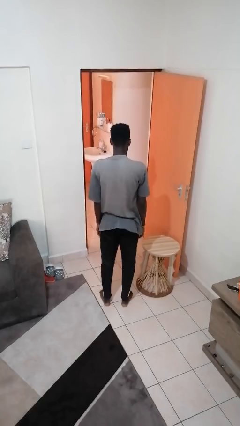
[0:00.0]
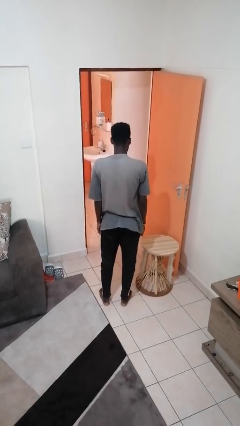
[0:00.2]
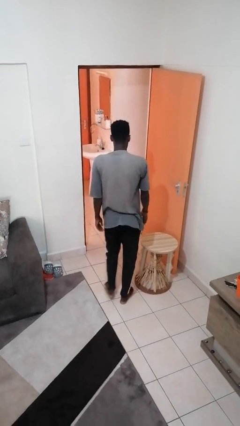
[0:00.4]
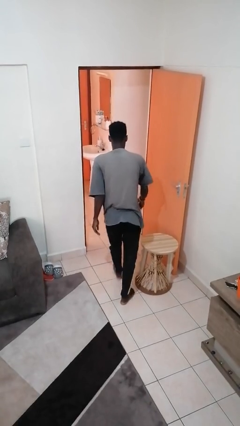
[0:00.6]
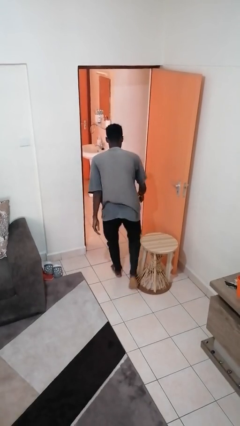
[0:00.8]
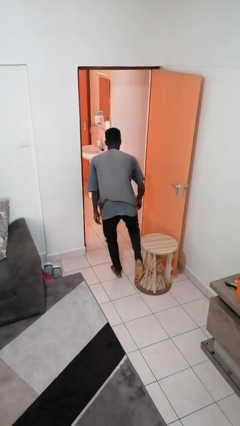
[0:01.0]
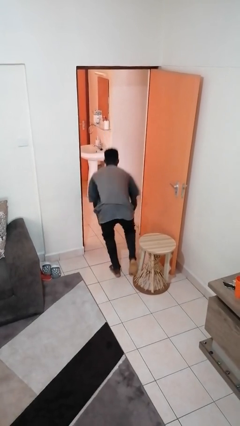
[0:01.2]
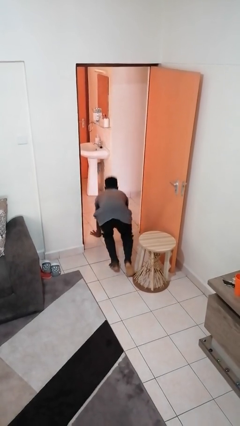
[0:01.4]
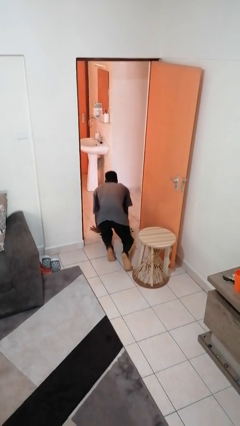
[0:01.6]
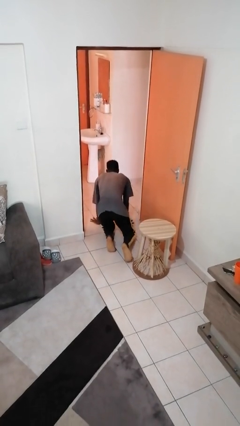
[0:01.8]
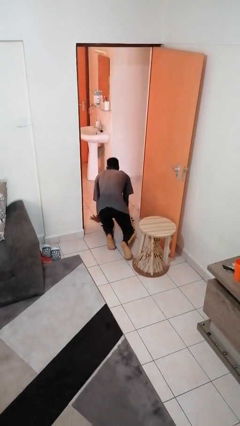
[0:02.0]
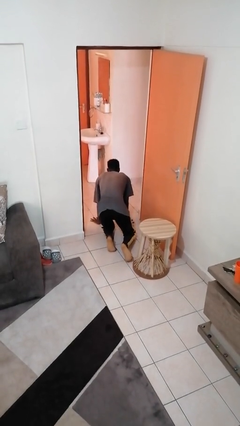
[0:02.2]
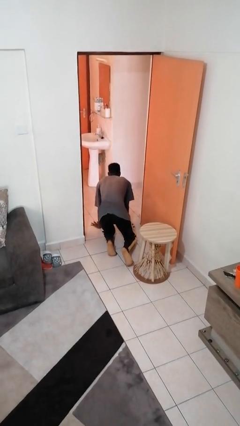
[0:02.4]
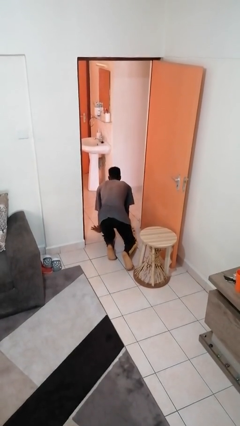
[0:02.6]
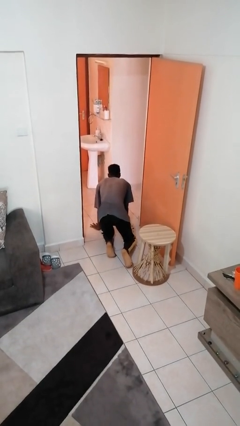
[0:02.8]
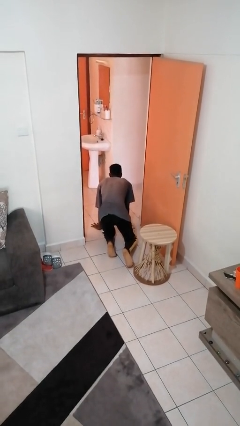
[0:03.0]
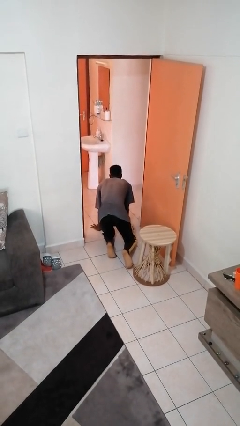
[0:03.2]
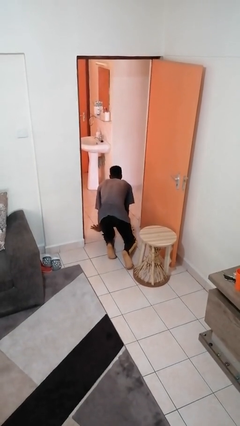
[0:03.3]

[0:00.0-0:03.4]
person trips on object on floor

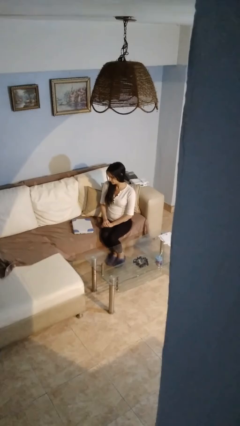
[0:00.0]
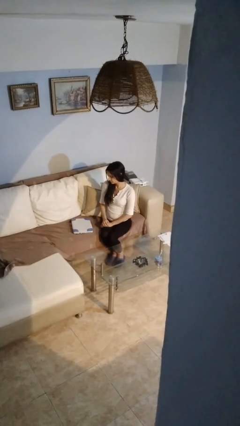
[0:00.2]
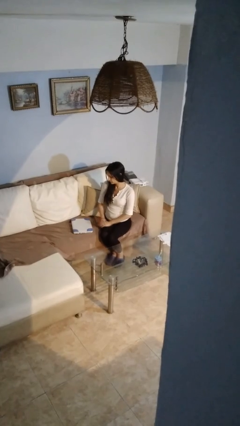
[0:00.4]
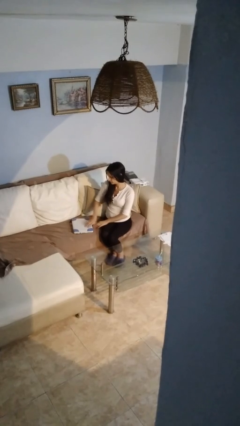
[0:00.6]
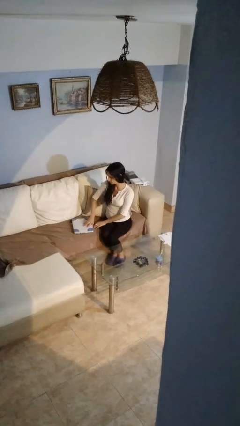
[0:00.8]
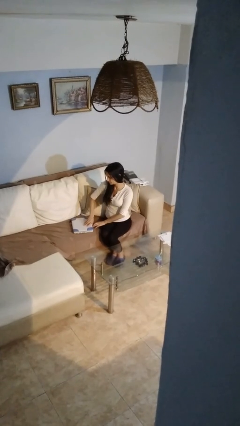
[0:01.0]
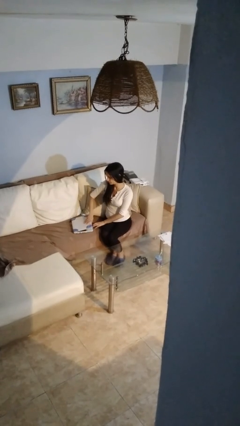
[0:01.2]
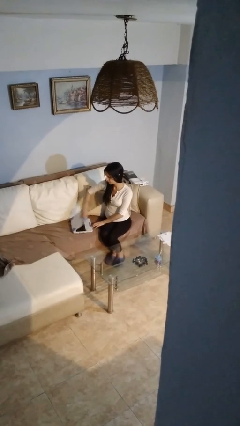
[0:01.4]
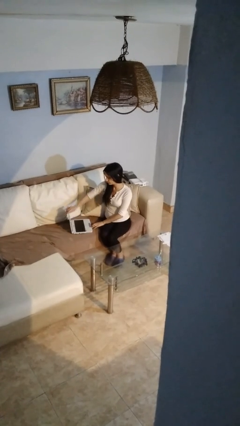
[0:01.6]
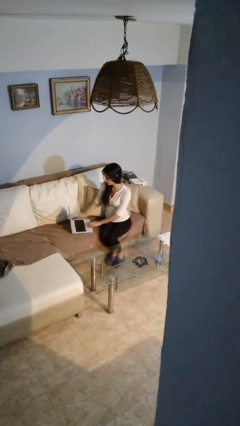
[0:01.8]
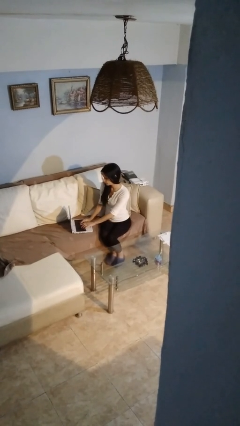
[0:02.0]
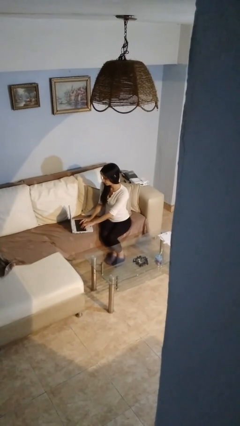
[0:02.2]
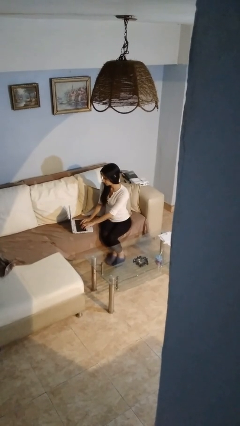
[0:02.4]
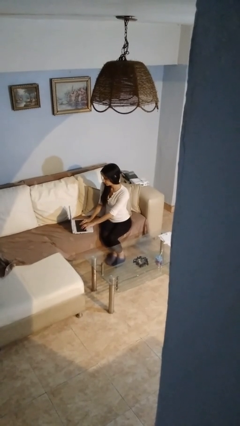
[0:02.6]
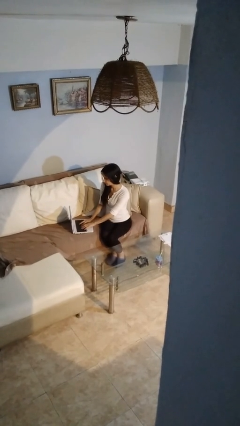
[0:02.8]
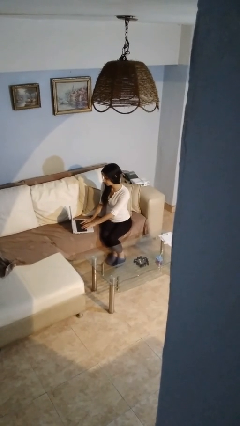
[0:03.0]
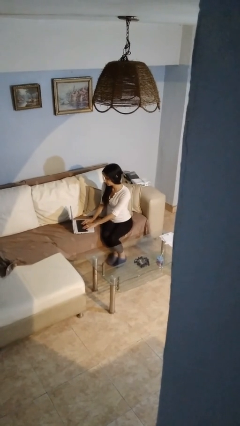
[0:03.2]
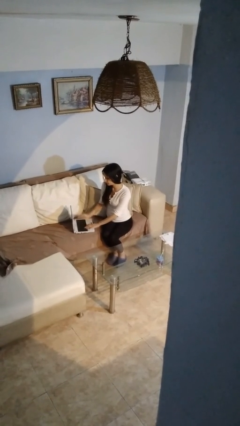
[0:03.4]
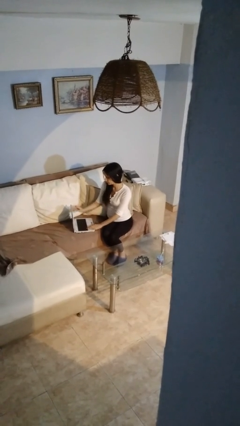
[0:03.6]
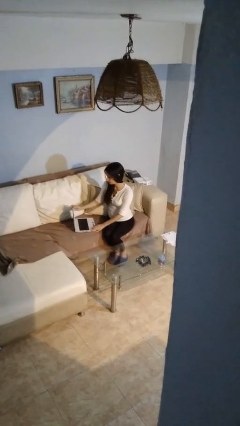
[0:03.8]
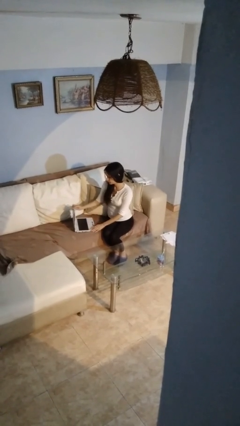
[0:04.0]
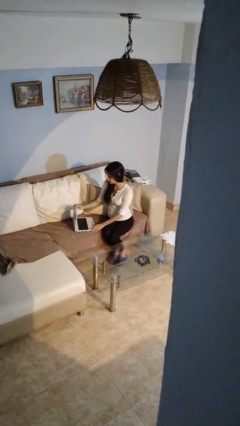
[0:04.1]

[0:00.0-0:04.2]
person opens laptop

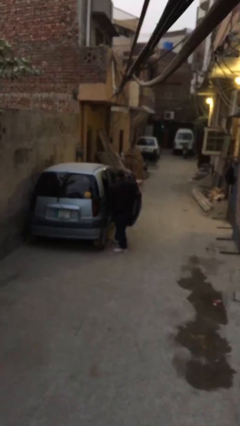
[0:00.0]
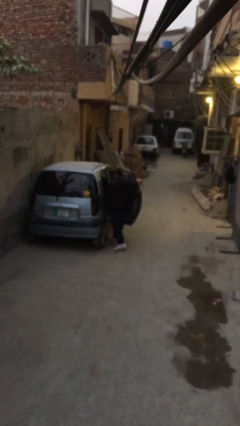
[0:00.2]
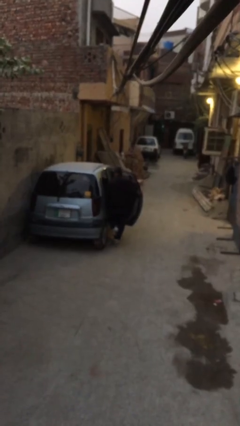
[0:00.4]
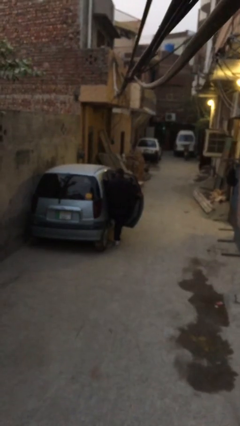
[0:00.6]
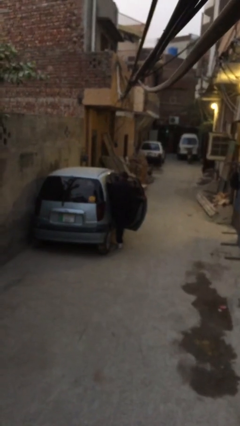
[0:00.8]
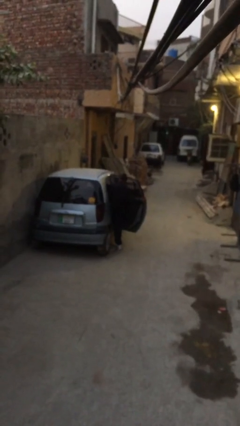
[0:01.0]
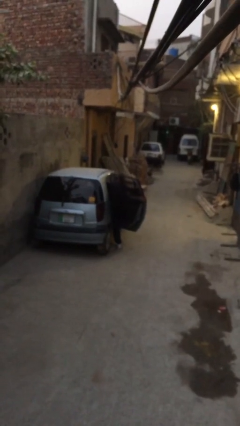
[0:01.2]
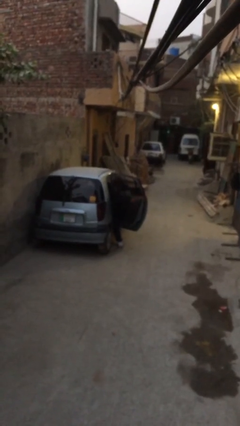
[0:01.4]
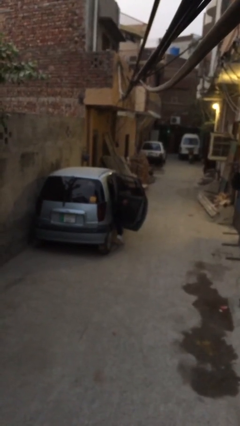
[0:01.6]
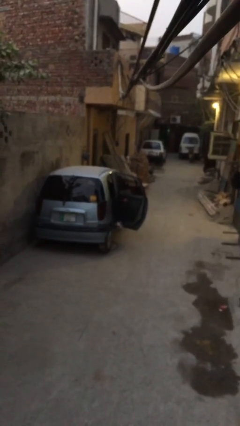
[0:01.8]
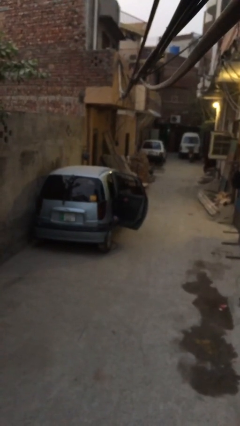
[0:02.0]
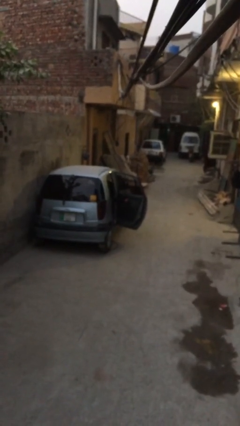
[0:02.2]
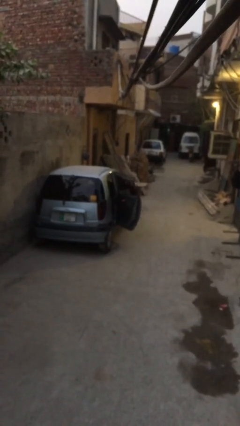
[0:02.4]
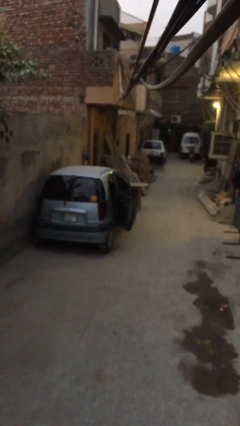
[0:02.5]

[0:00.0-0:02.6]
person enters car

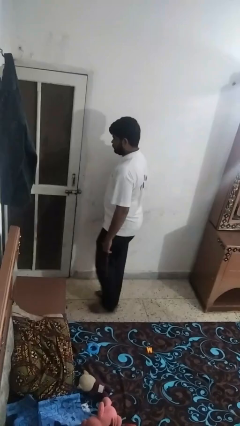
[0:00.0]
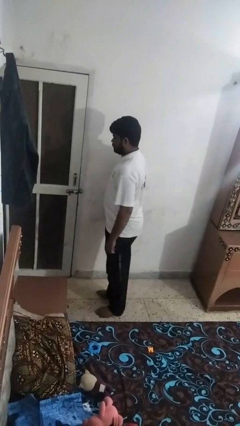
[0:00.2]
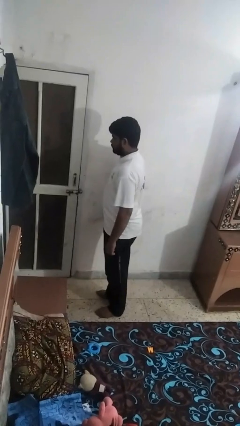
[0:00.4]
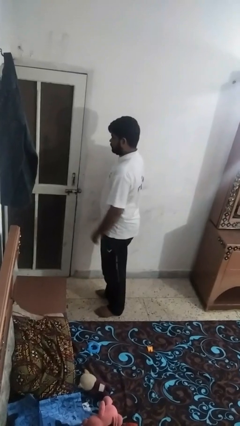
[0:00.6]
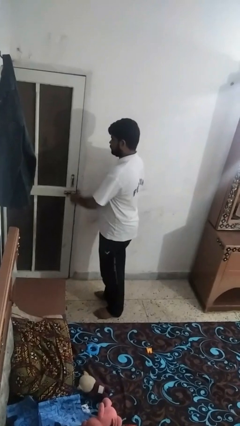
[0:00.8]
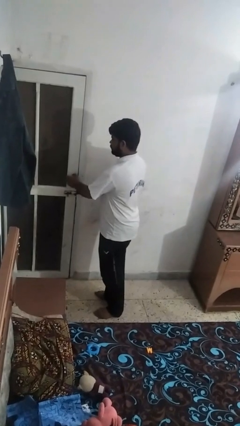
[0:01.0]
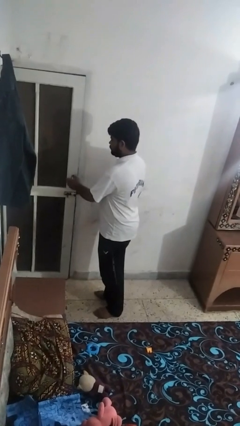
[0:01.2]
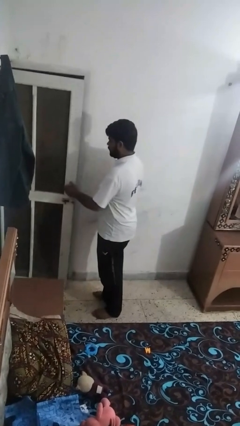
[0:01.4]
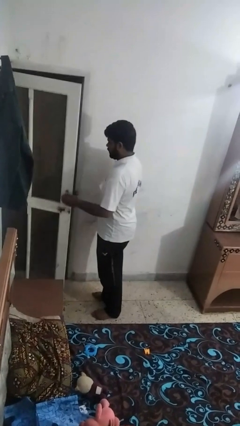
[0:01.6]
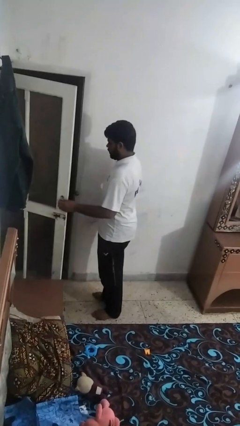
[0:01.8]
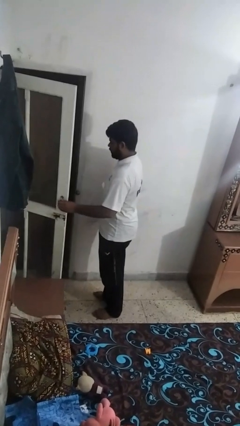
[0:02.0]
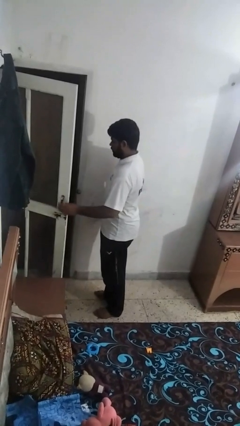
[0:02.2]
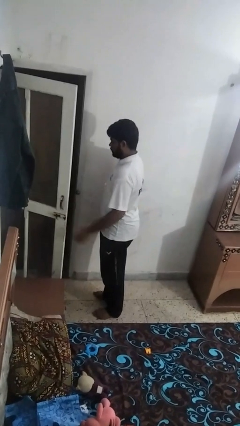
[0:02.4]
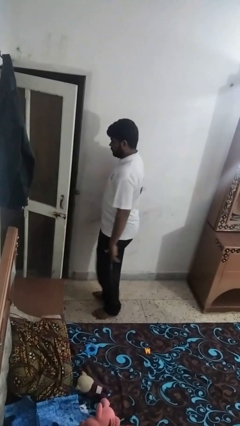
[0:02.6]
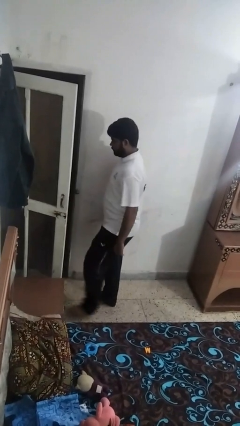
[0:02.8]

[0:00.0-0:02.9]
person opens facility door

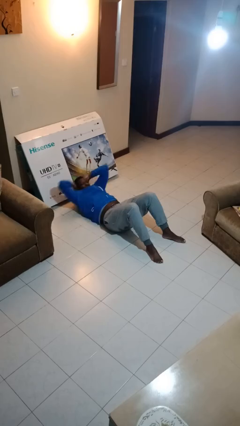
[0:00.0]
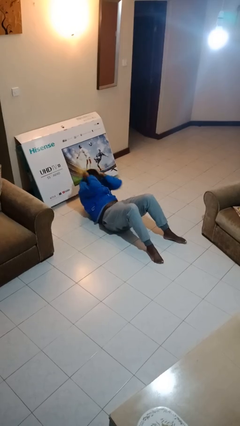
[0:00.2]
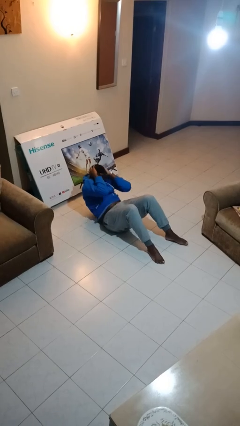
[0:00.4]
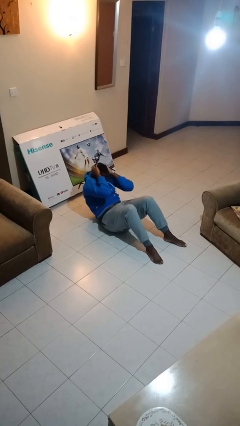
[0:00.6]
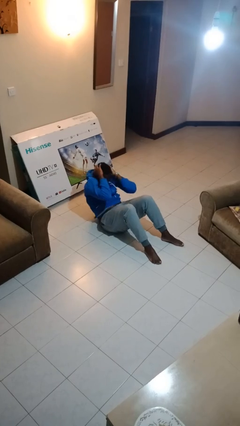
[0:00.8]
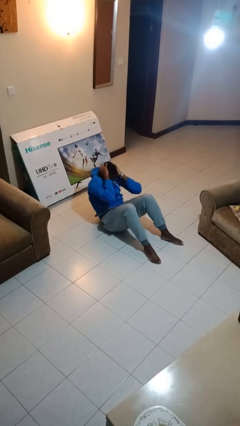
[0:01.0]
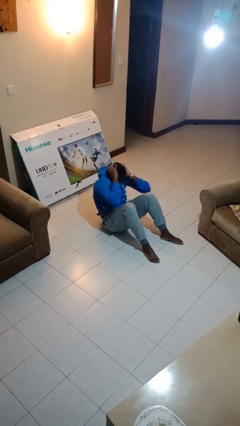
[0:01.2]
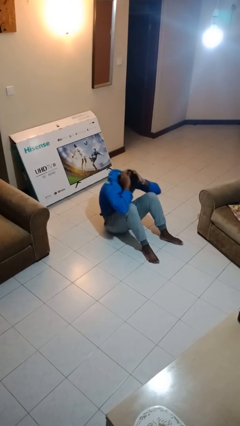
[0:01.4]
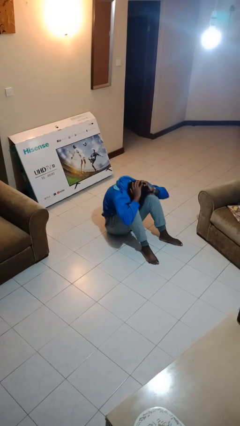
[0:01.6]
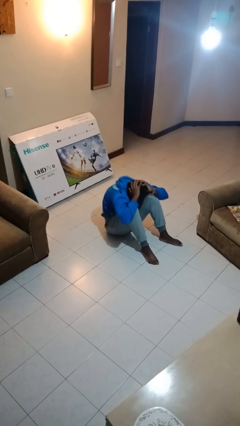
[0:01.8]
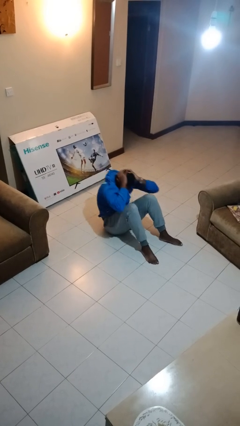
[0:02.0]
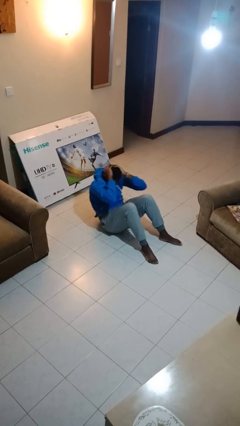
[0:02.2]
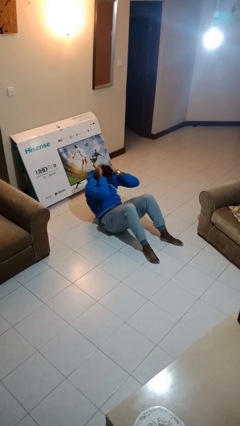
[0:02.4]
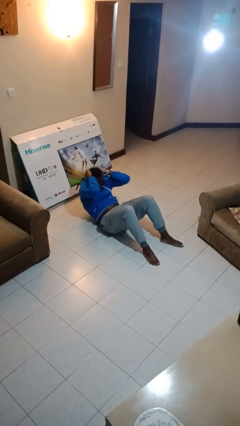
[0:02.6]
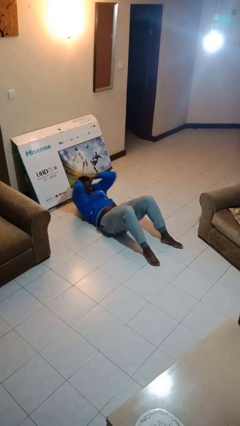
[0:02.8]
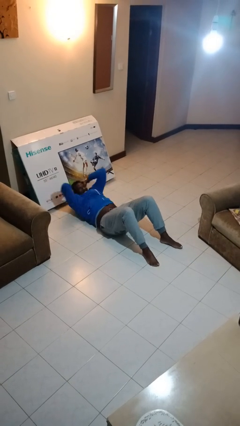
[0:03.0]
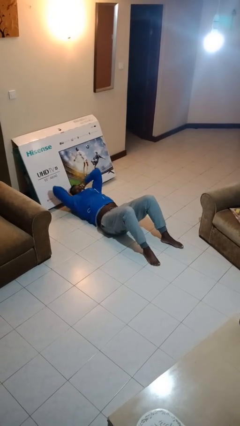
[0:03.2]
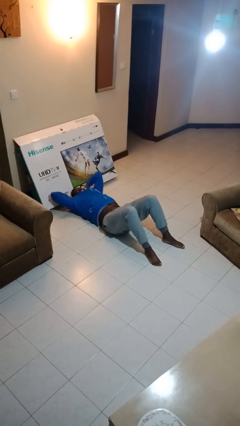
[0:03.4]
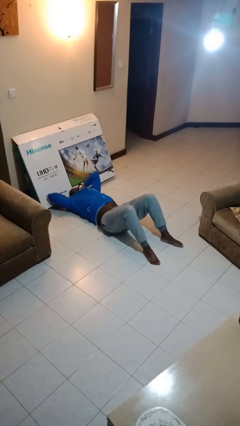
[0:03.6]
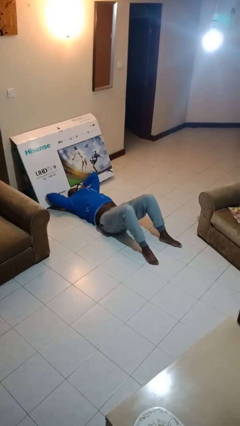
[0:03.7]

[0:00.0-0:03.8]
person exercises with situp

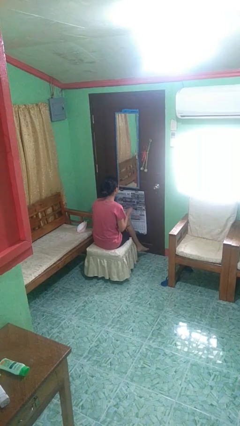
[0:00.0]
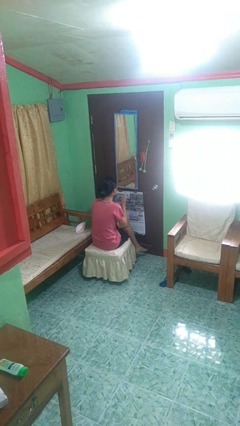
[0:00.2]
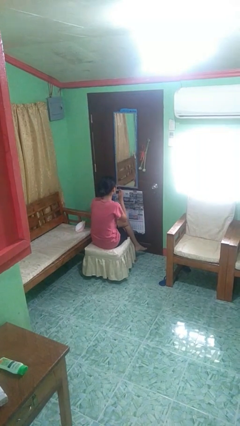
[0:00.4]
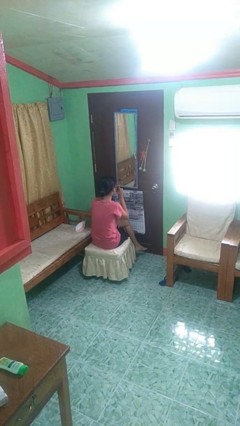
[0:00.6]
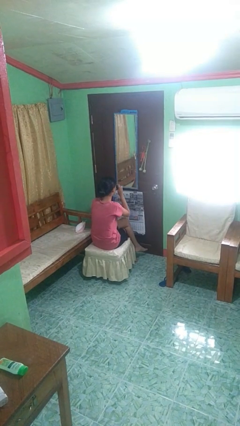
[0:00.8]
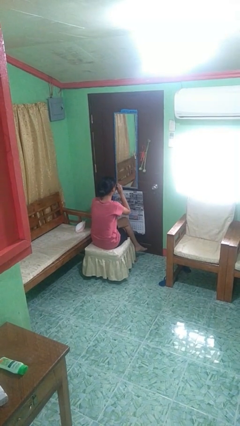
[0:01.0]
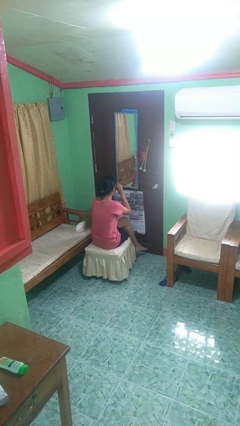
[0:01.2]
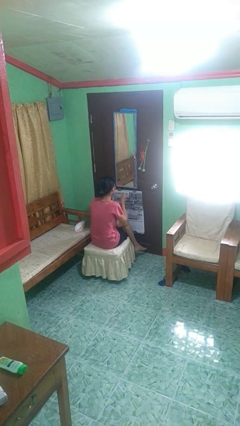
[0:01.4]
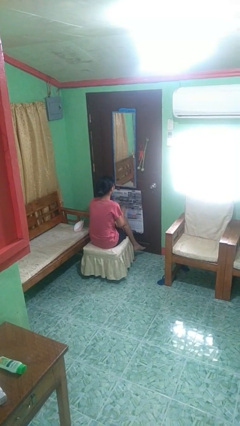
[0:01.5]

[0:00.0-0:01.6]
person puts on sunglasses
